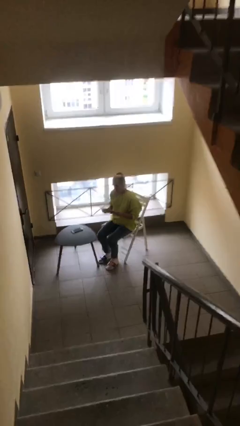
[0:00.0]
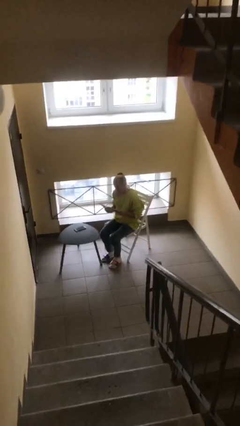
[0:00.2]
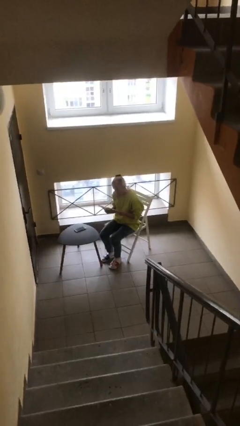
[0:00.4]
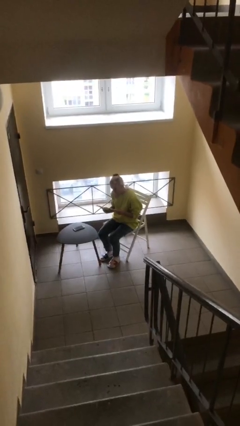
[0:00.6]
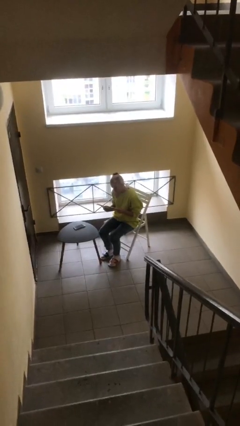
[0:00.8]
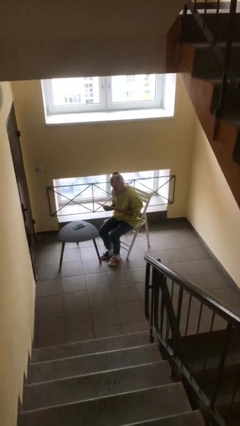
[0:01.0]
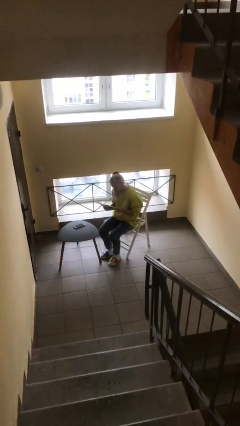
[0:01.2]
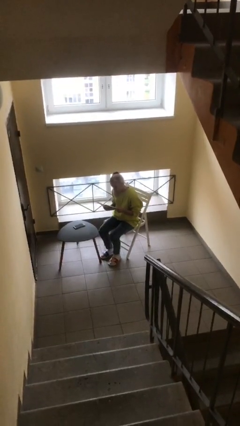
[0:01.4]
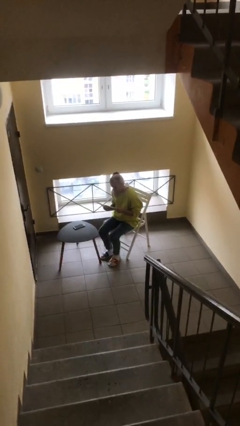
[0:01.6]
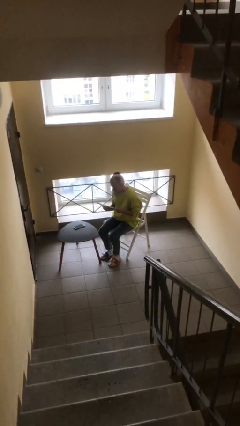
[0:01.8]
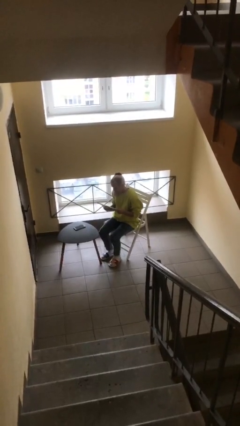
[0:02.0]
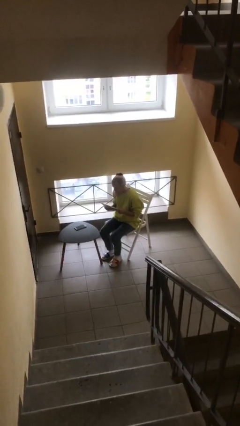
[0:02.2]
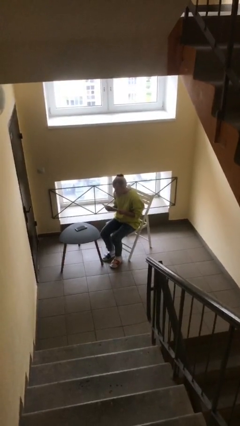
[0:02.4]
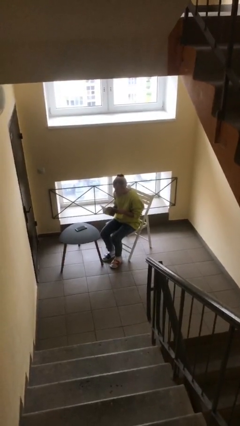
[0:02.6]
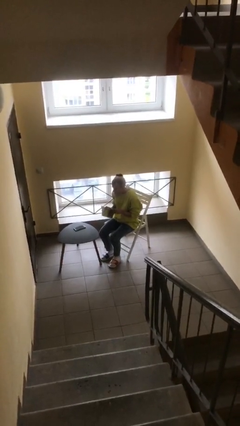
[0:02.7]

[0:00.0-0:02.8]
person reads document

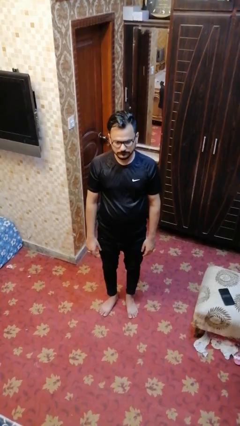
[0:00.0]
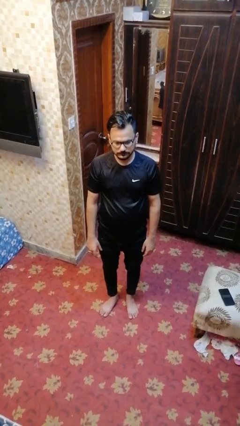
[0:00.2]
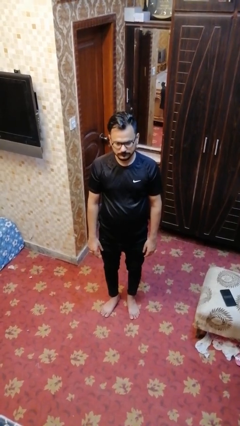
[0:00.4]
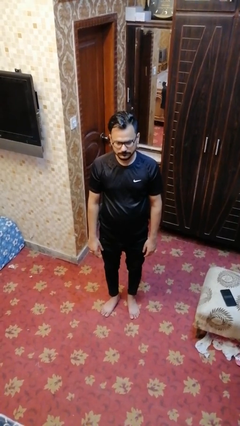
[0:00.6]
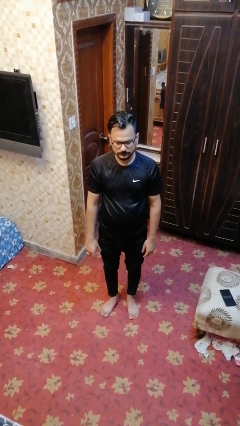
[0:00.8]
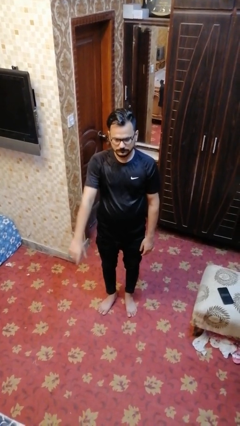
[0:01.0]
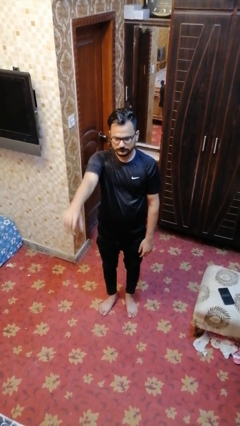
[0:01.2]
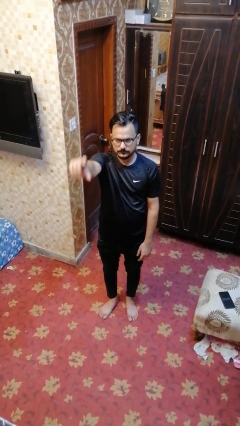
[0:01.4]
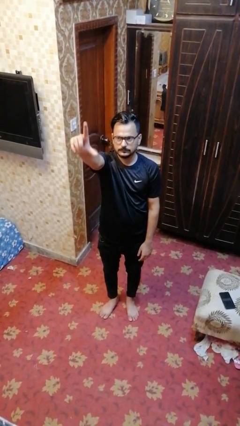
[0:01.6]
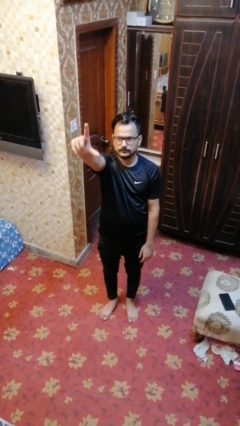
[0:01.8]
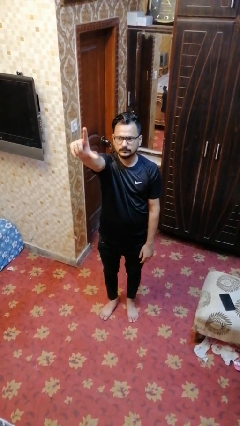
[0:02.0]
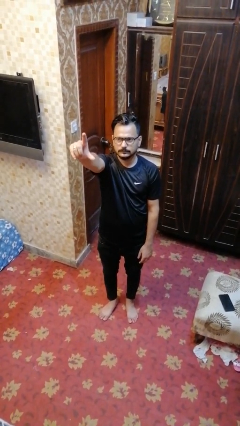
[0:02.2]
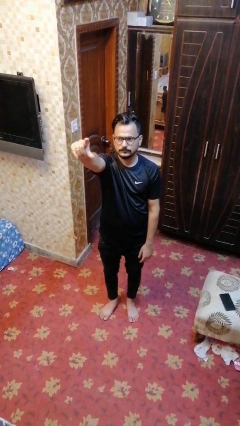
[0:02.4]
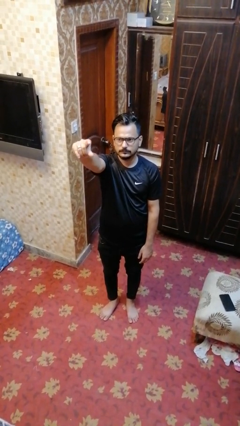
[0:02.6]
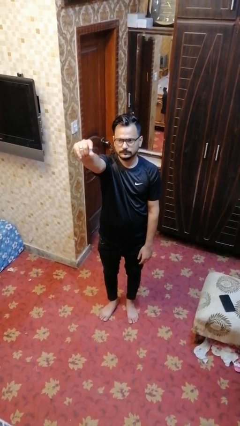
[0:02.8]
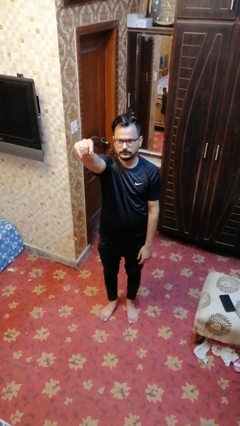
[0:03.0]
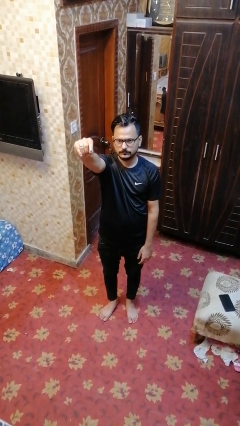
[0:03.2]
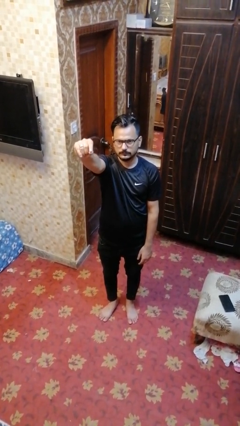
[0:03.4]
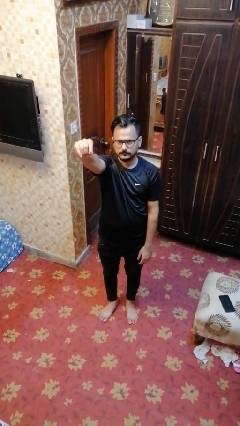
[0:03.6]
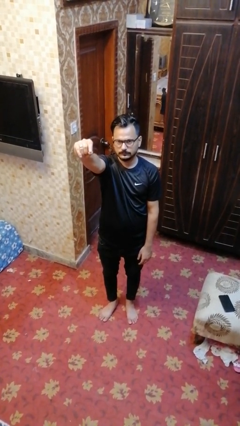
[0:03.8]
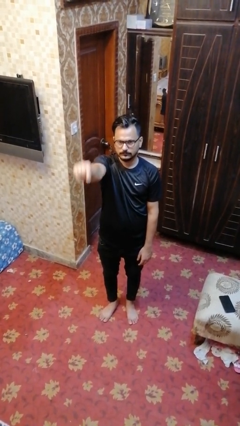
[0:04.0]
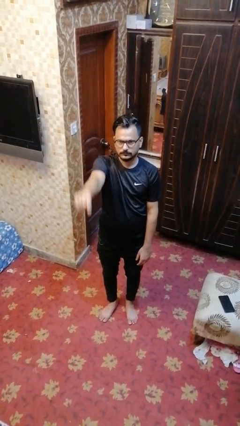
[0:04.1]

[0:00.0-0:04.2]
person gestures zoom in

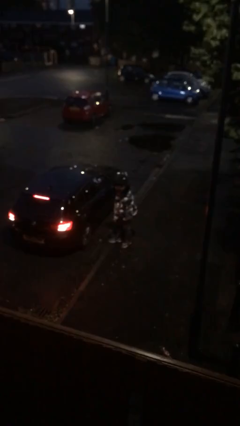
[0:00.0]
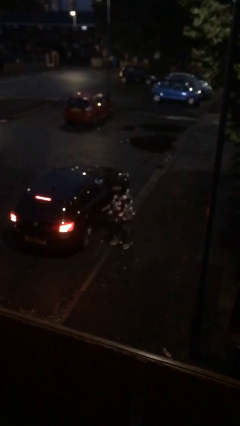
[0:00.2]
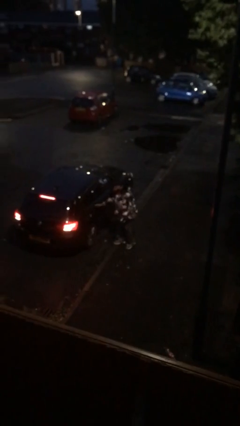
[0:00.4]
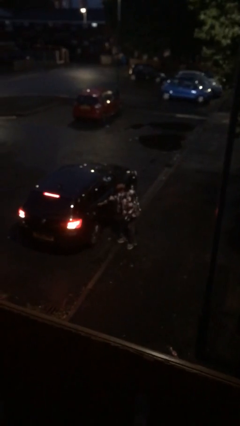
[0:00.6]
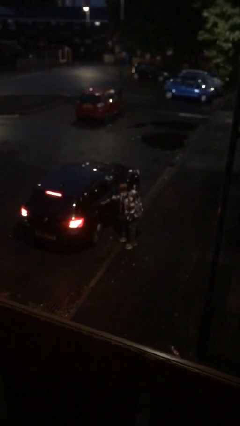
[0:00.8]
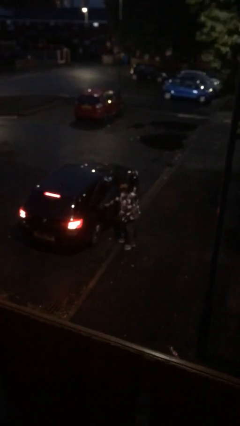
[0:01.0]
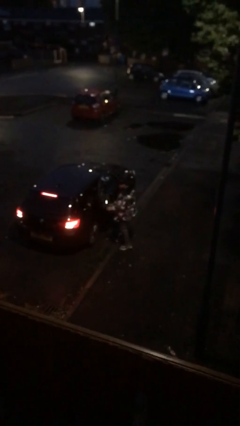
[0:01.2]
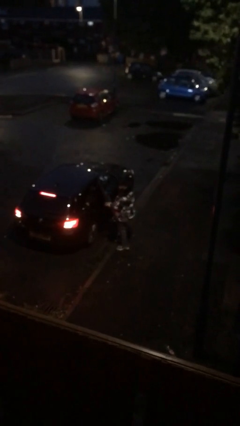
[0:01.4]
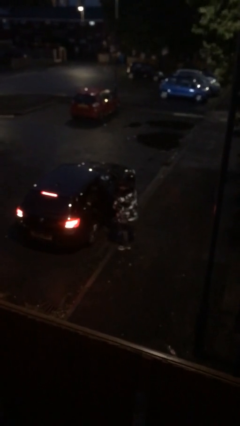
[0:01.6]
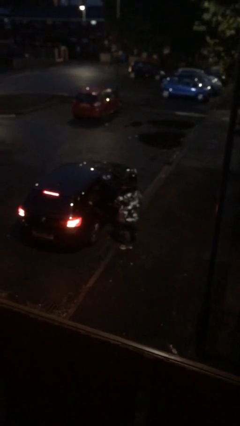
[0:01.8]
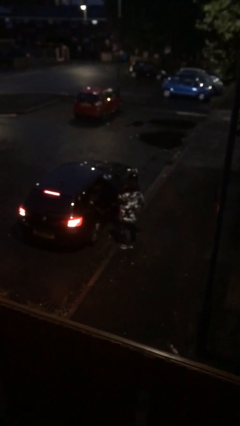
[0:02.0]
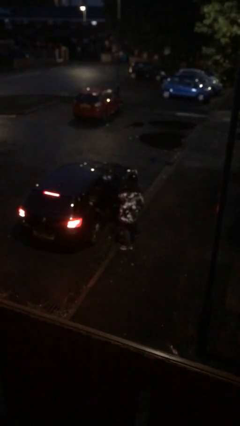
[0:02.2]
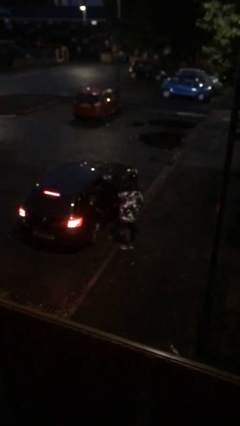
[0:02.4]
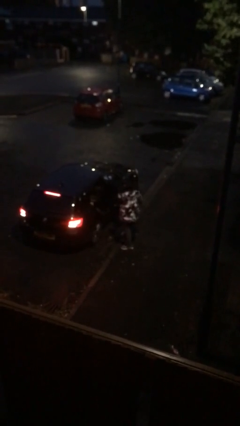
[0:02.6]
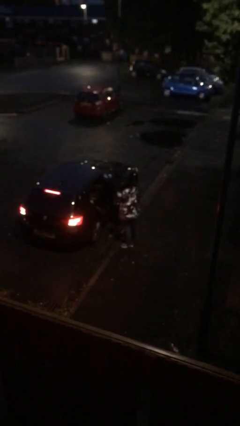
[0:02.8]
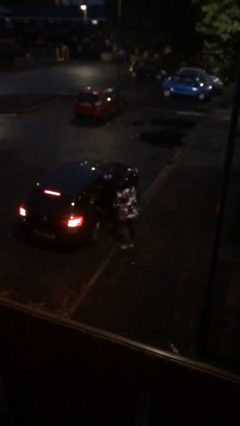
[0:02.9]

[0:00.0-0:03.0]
person opens car door

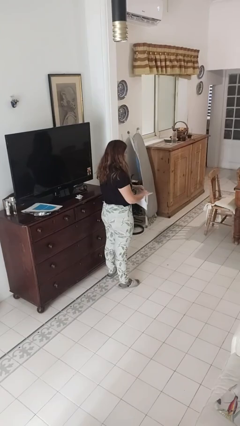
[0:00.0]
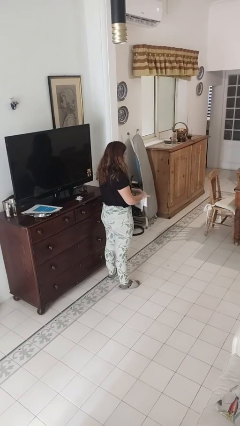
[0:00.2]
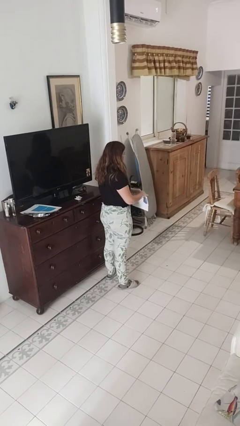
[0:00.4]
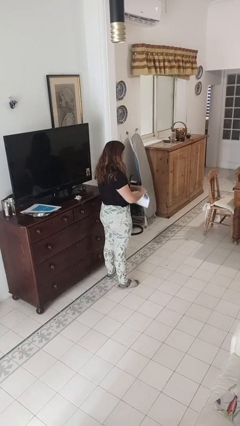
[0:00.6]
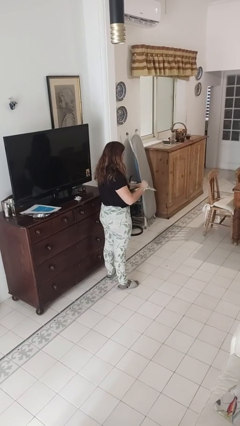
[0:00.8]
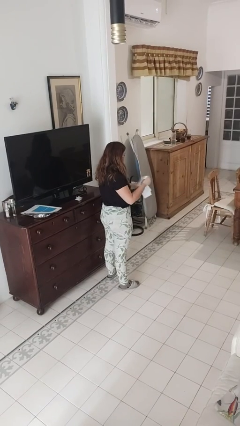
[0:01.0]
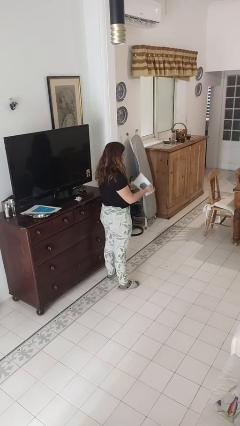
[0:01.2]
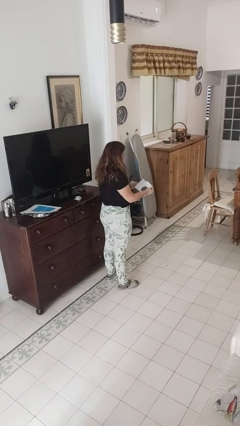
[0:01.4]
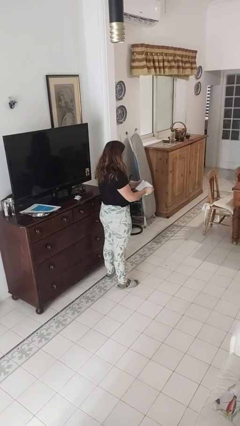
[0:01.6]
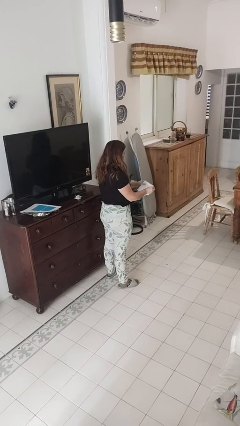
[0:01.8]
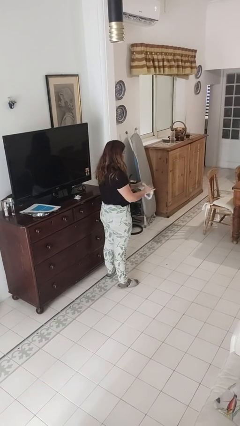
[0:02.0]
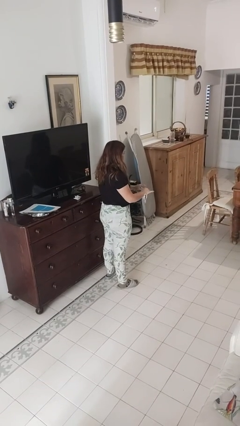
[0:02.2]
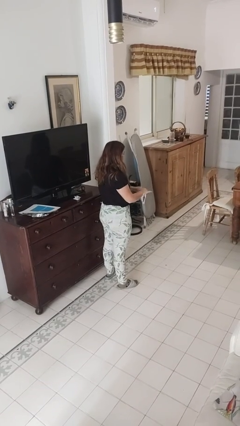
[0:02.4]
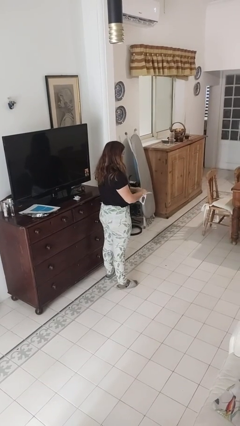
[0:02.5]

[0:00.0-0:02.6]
person tears paper

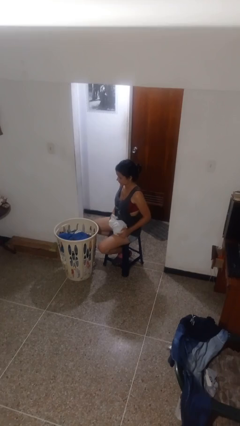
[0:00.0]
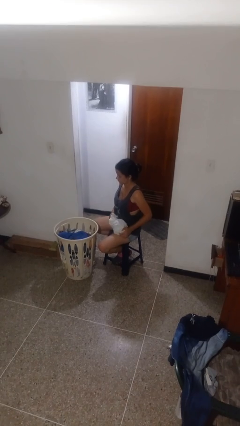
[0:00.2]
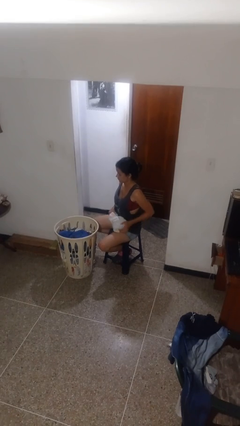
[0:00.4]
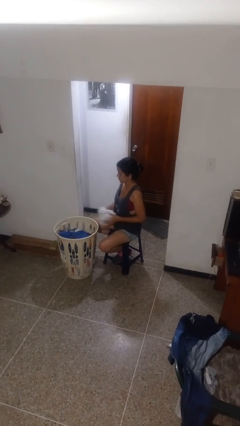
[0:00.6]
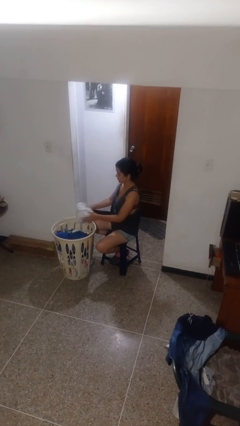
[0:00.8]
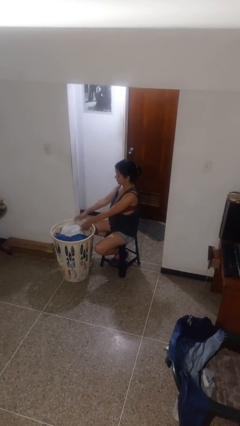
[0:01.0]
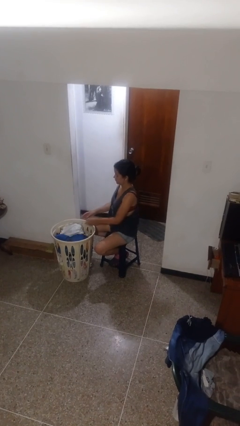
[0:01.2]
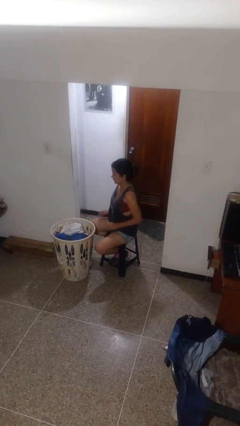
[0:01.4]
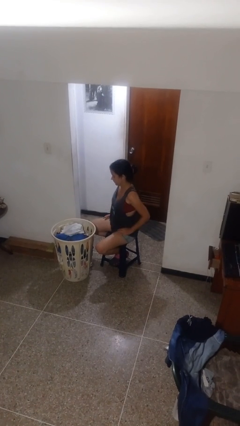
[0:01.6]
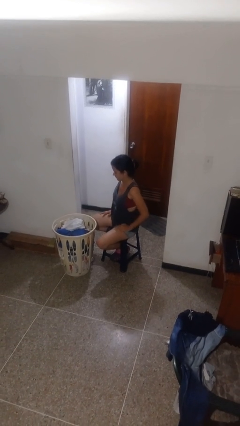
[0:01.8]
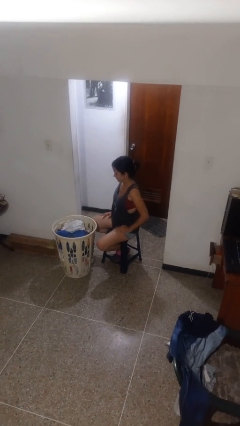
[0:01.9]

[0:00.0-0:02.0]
person puts object into basket

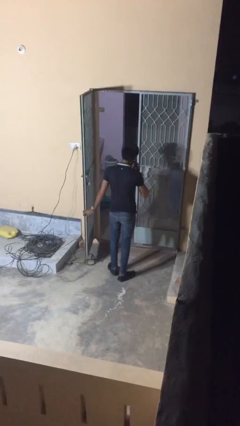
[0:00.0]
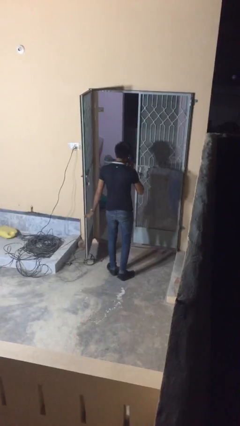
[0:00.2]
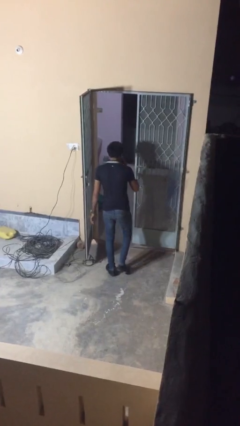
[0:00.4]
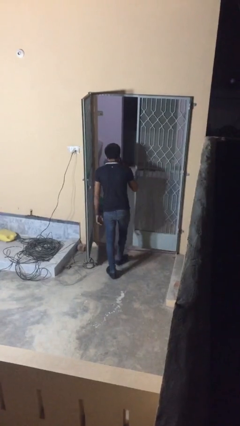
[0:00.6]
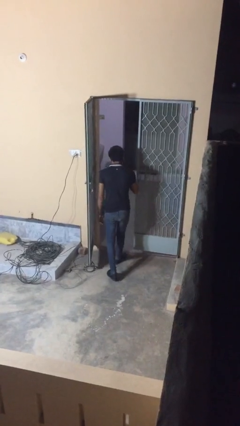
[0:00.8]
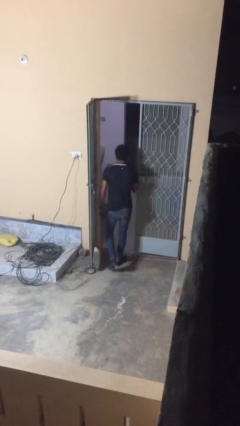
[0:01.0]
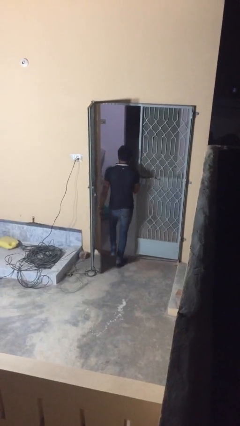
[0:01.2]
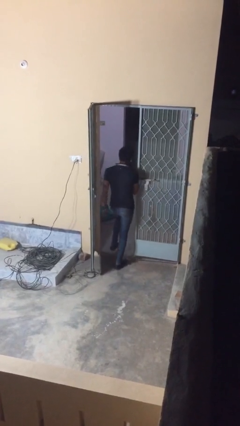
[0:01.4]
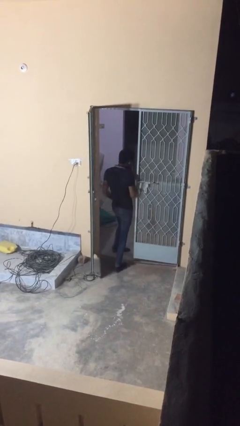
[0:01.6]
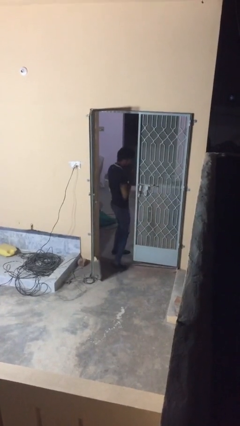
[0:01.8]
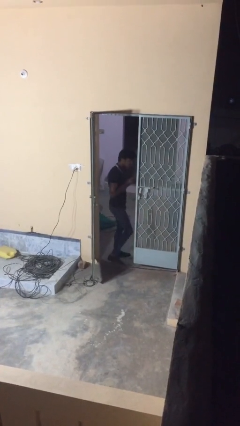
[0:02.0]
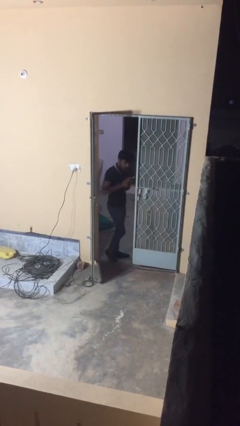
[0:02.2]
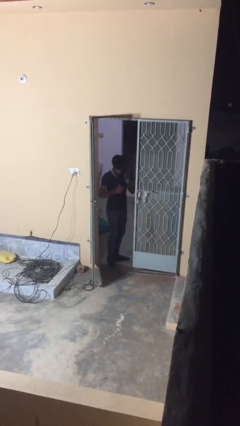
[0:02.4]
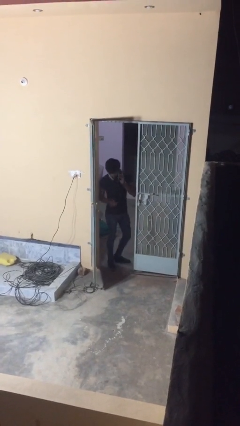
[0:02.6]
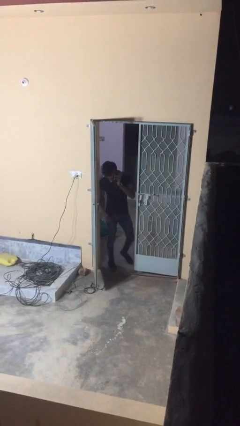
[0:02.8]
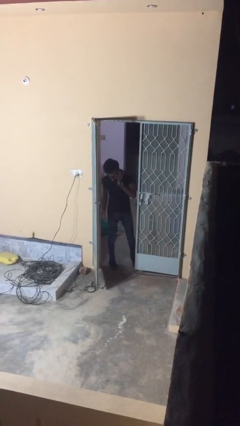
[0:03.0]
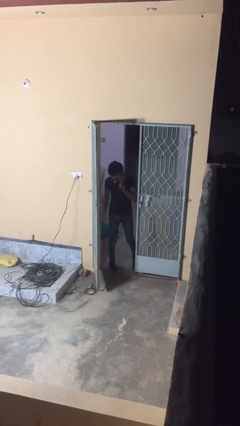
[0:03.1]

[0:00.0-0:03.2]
person exits scene through structure
